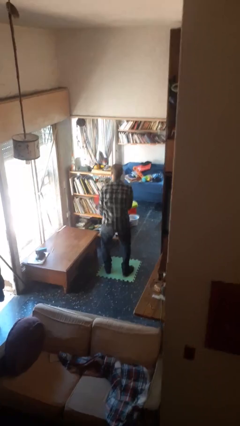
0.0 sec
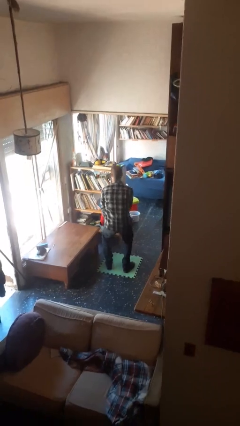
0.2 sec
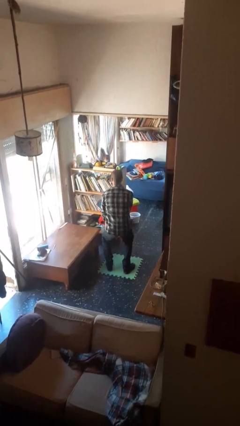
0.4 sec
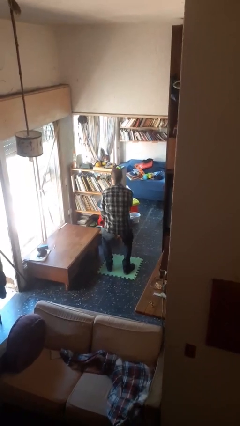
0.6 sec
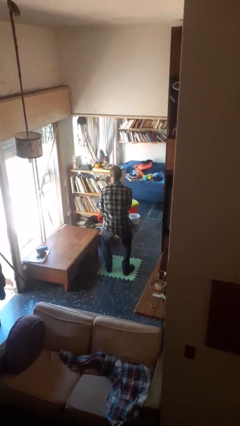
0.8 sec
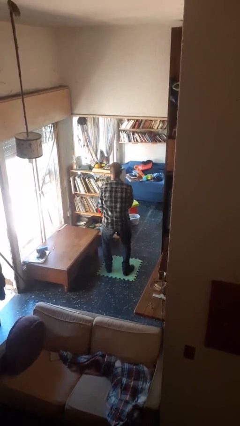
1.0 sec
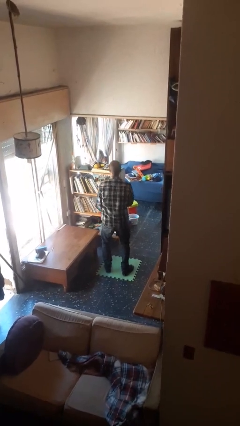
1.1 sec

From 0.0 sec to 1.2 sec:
person catches dropped object

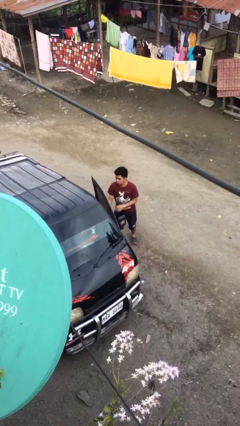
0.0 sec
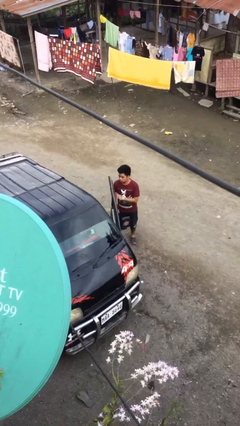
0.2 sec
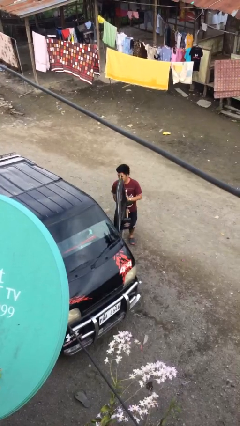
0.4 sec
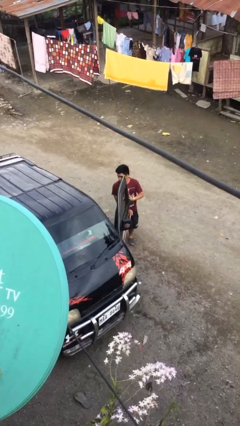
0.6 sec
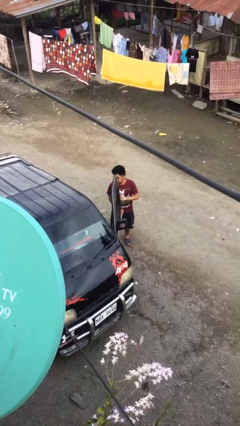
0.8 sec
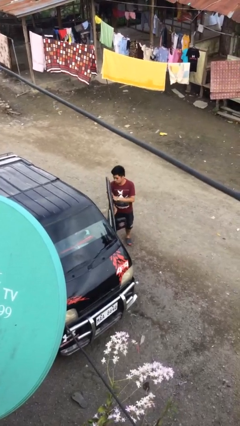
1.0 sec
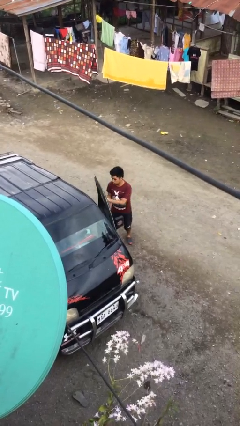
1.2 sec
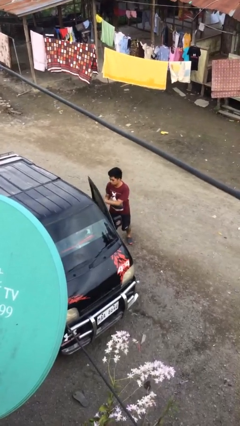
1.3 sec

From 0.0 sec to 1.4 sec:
person opens car door

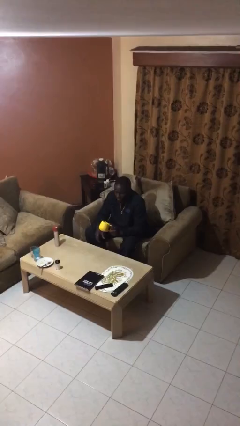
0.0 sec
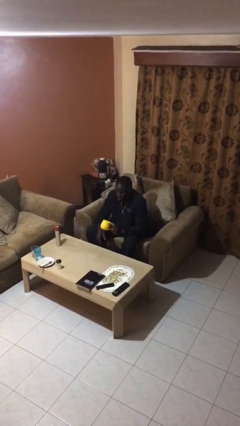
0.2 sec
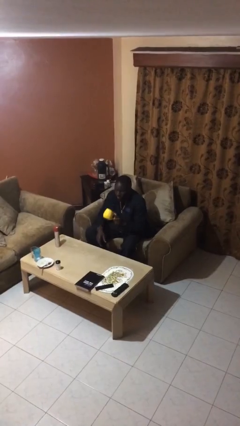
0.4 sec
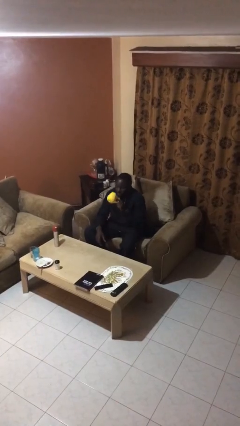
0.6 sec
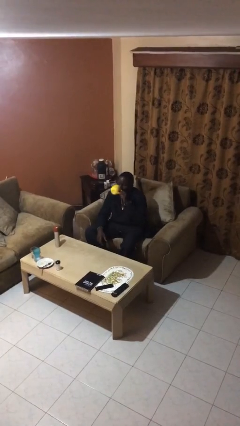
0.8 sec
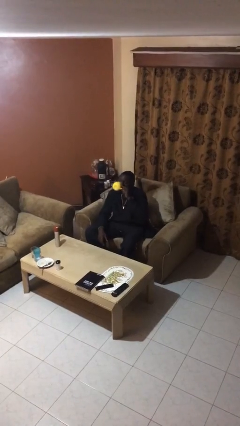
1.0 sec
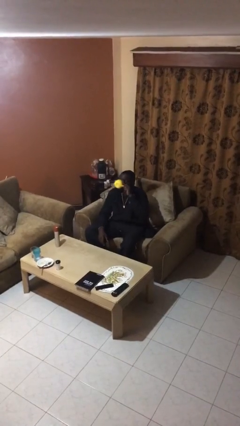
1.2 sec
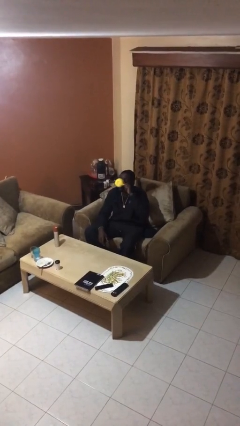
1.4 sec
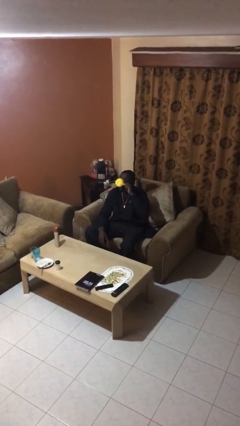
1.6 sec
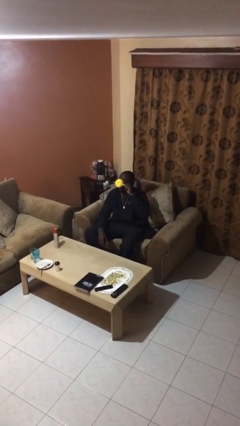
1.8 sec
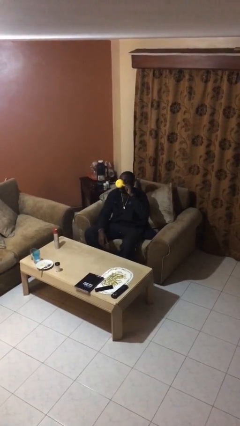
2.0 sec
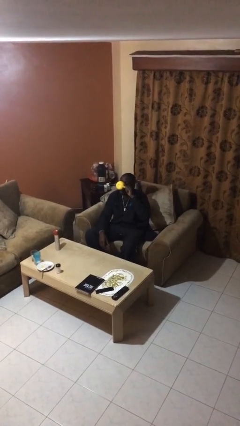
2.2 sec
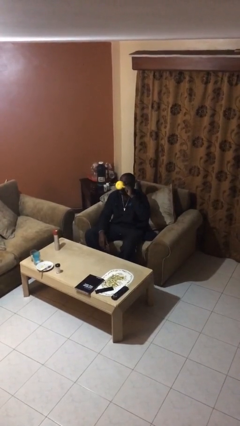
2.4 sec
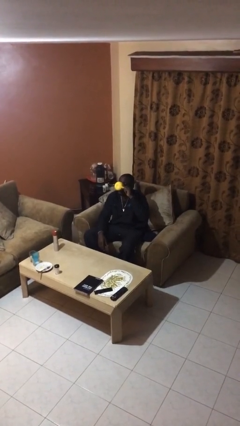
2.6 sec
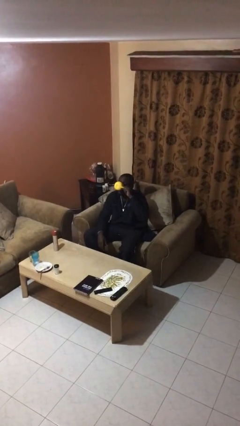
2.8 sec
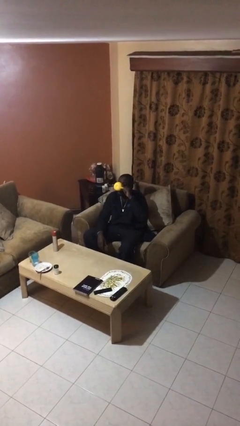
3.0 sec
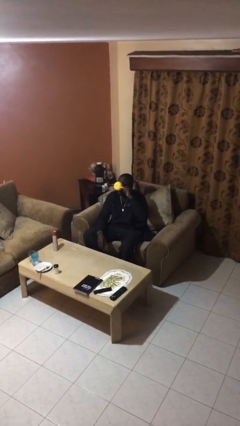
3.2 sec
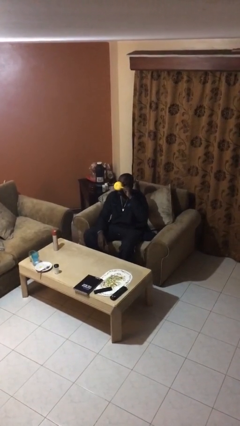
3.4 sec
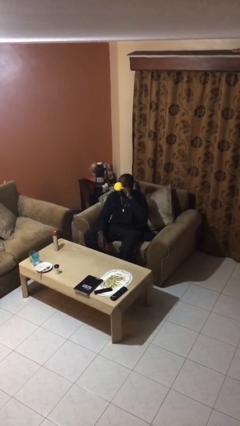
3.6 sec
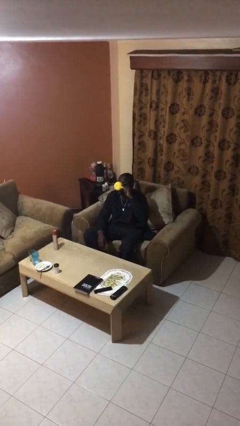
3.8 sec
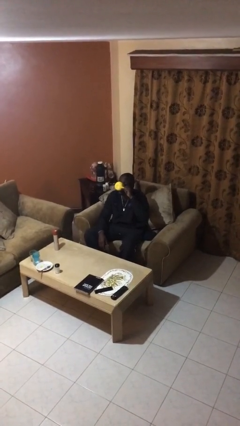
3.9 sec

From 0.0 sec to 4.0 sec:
person drinks from mug

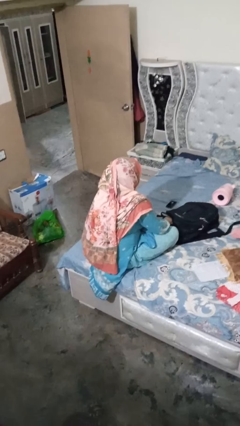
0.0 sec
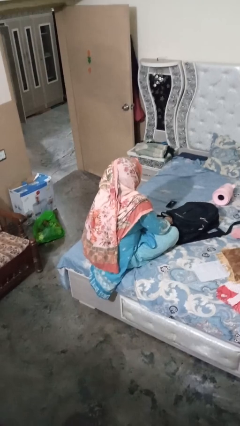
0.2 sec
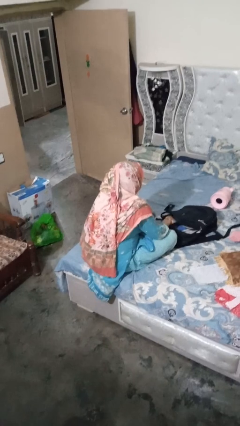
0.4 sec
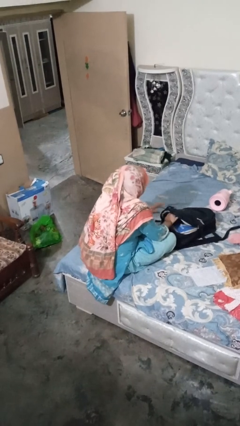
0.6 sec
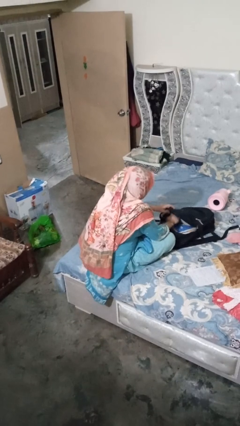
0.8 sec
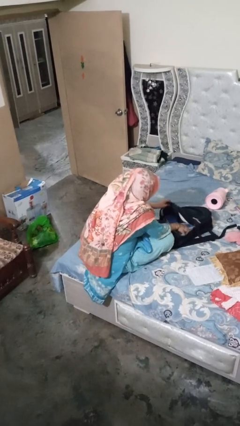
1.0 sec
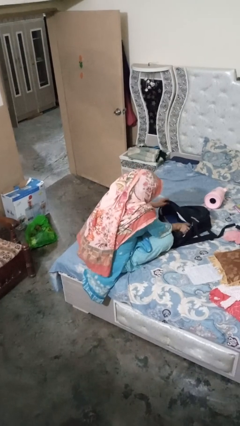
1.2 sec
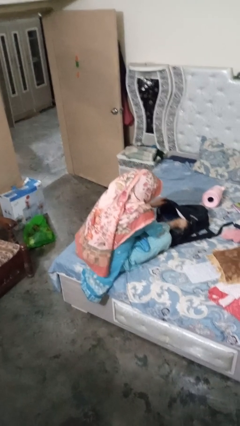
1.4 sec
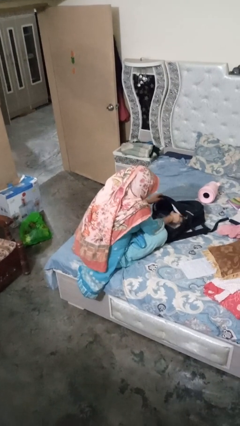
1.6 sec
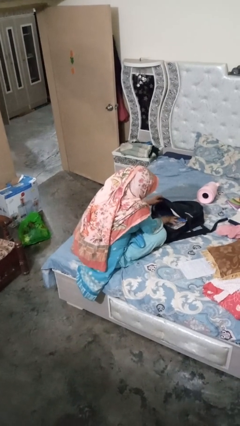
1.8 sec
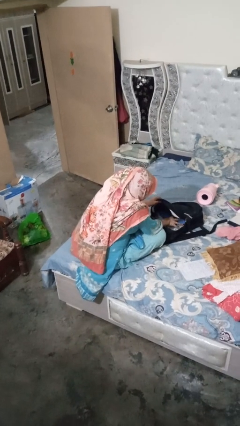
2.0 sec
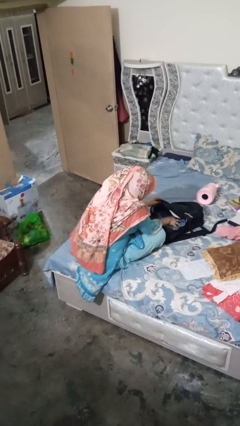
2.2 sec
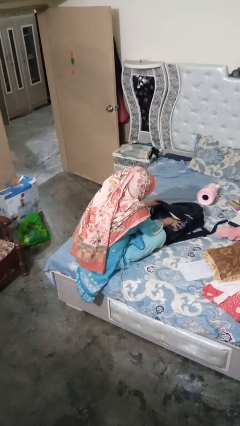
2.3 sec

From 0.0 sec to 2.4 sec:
person searches in bag

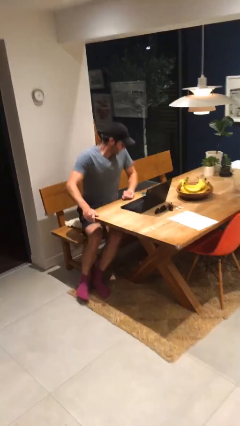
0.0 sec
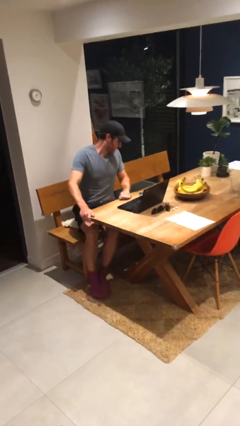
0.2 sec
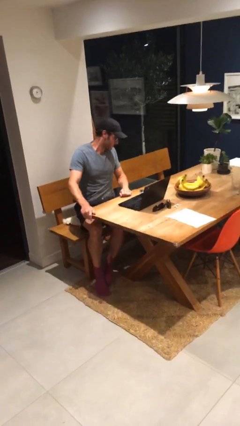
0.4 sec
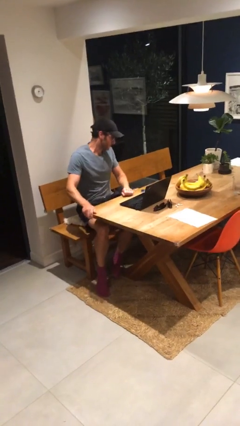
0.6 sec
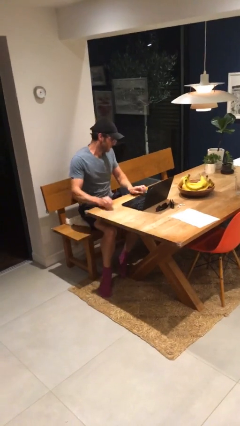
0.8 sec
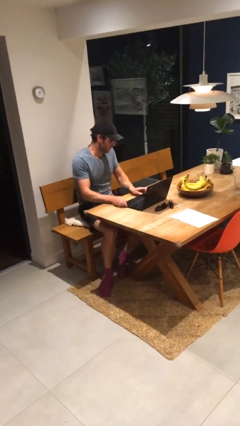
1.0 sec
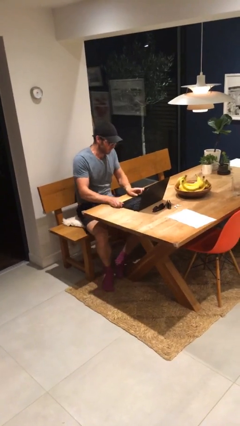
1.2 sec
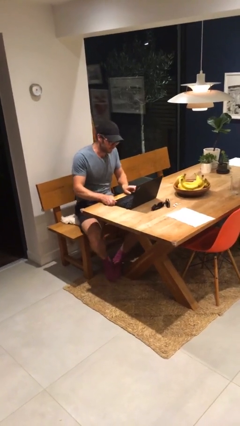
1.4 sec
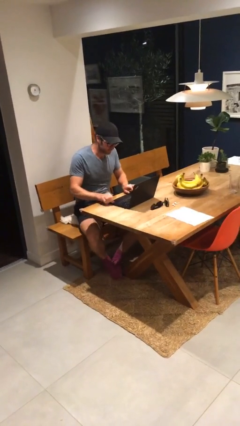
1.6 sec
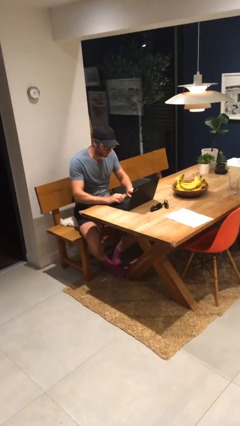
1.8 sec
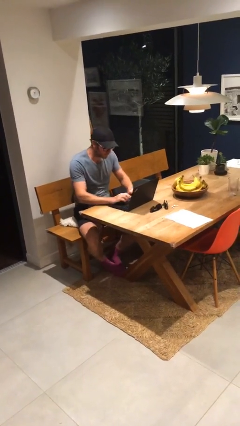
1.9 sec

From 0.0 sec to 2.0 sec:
person sits down

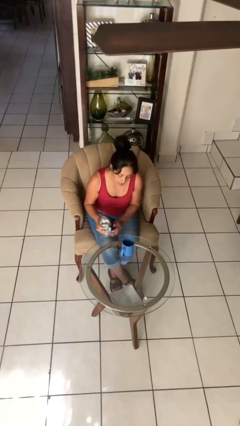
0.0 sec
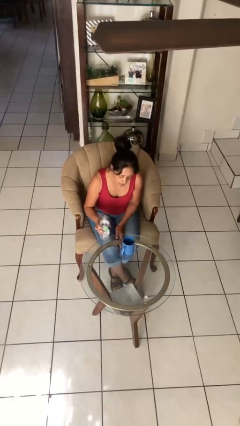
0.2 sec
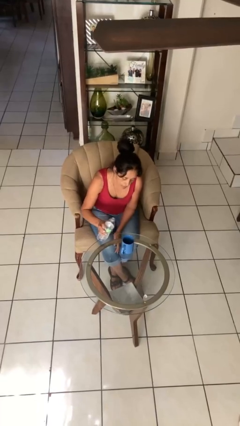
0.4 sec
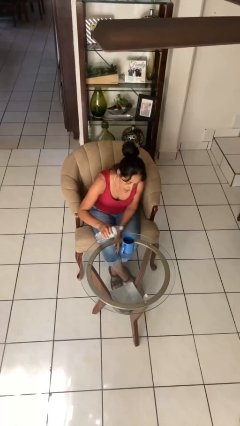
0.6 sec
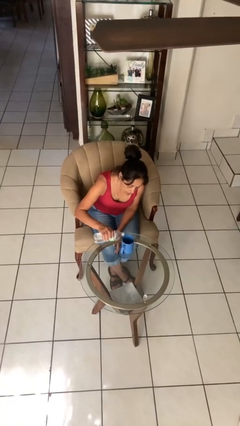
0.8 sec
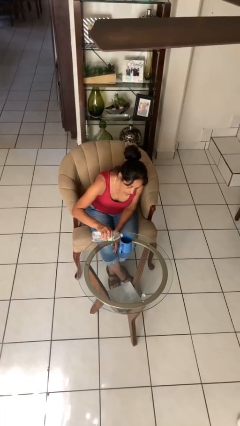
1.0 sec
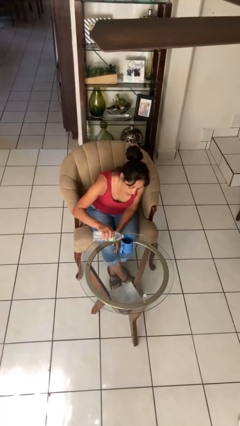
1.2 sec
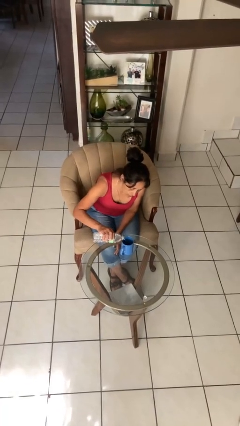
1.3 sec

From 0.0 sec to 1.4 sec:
person pours liquid into cup

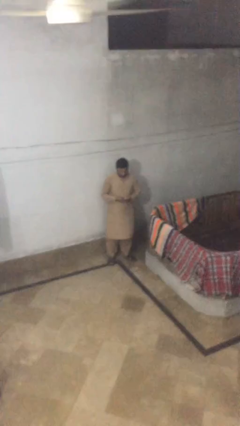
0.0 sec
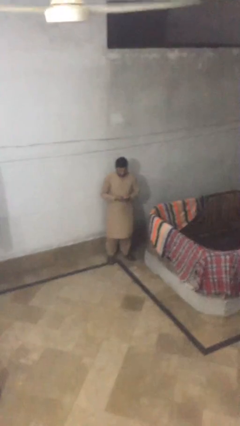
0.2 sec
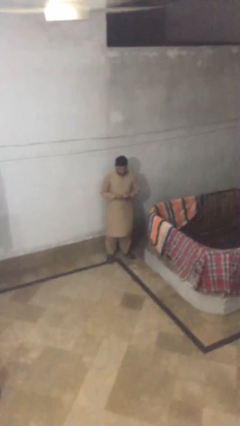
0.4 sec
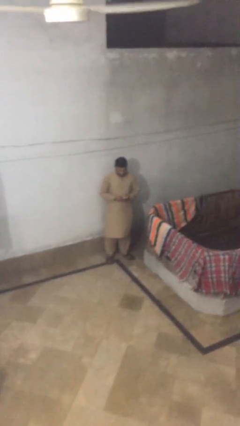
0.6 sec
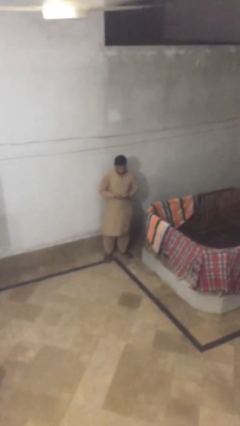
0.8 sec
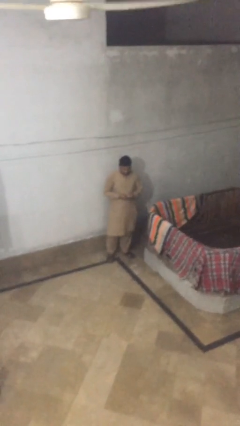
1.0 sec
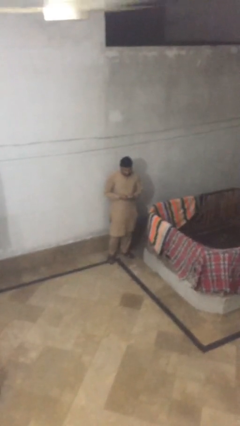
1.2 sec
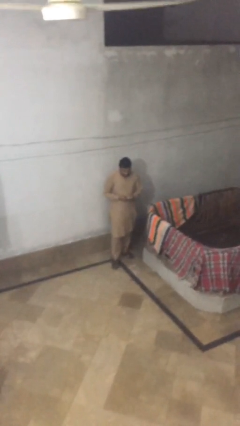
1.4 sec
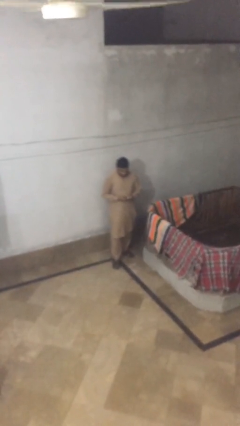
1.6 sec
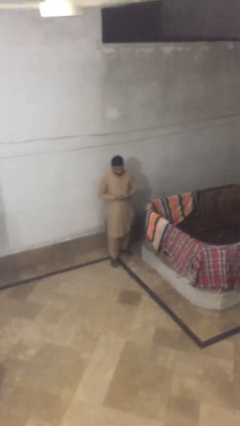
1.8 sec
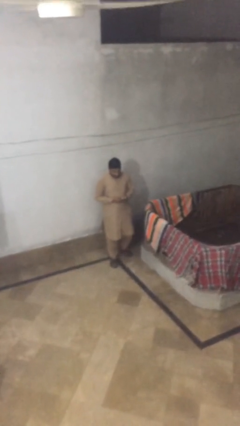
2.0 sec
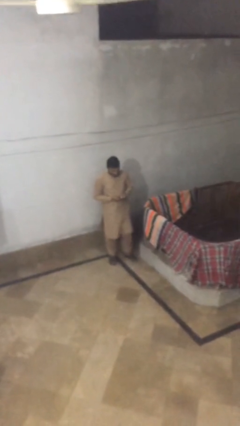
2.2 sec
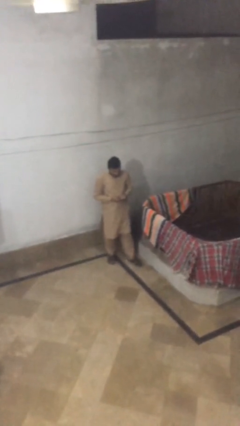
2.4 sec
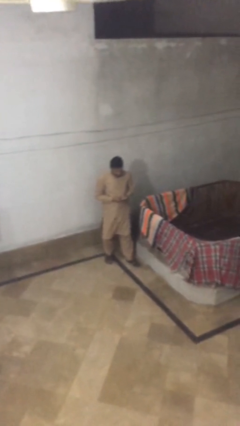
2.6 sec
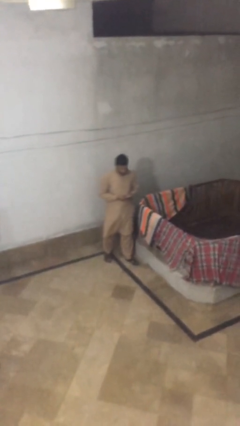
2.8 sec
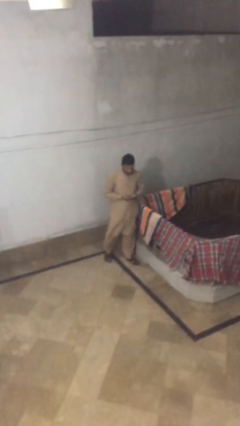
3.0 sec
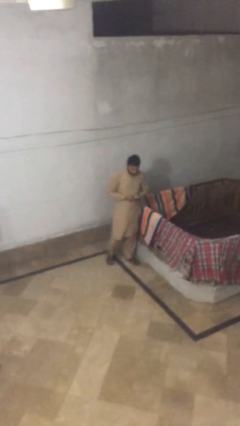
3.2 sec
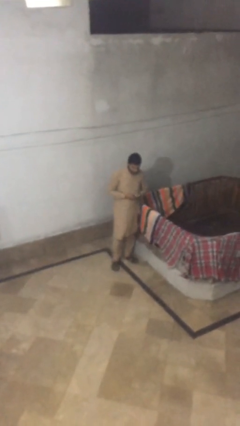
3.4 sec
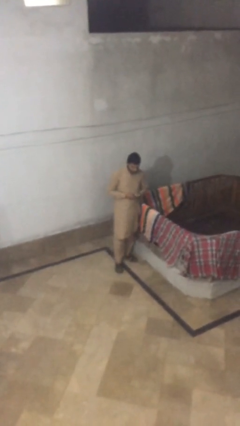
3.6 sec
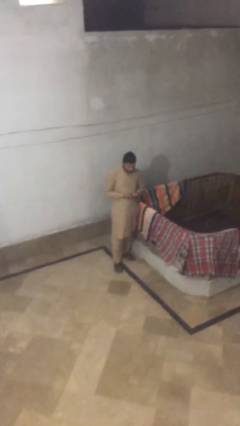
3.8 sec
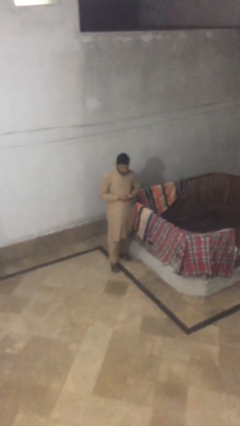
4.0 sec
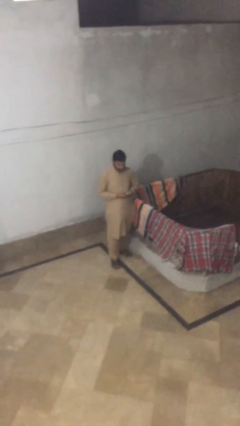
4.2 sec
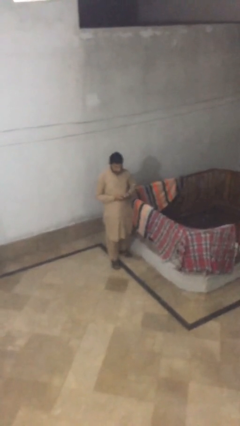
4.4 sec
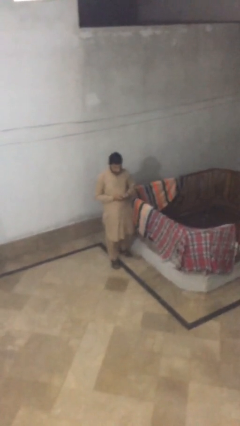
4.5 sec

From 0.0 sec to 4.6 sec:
person texts on phone

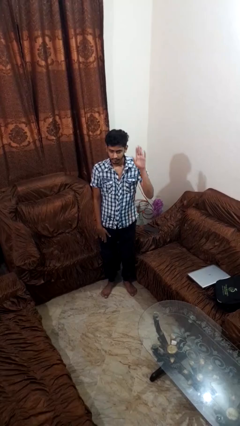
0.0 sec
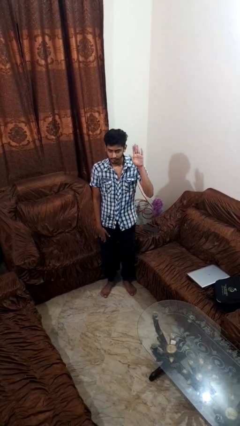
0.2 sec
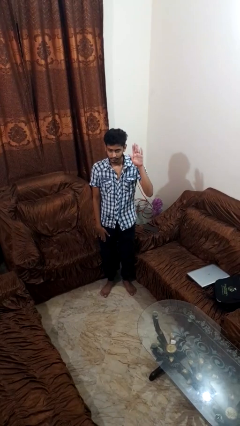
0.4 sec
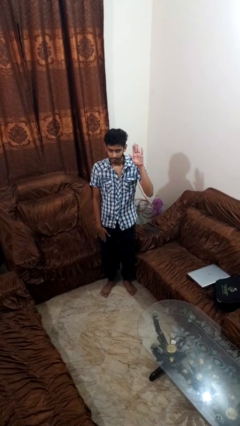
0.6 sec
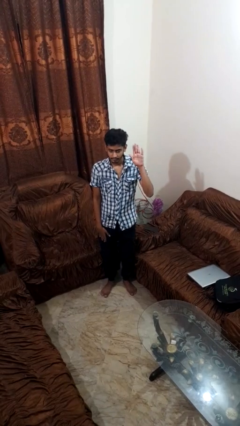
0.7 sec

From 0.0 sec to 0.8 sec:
person gestures raise hand
